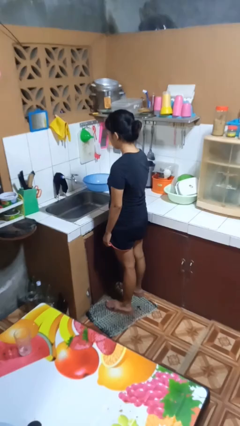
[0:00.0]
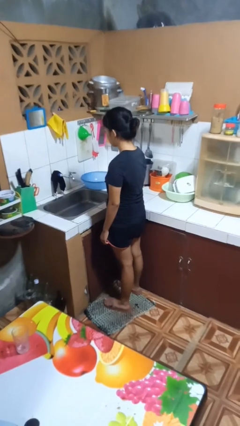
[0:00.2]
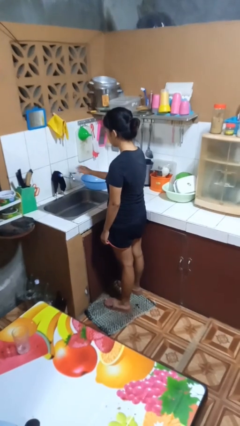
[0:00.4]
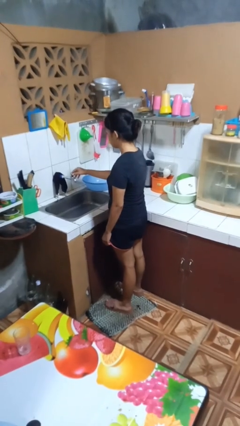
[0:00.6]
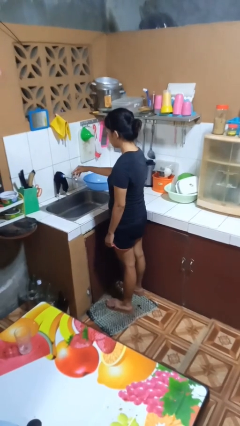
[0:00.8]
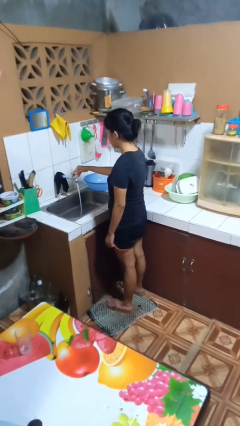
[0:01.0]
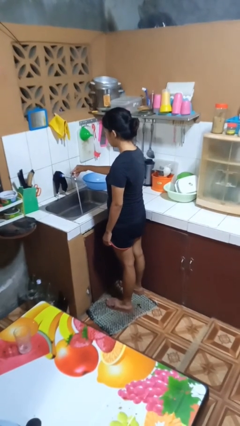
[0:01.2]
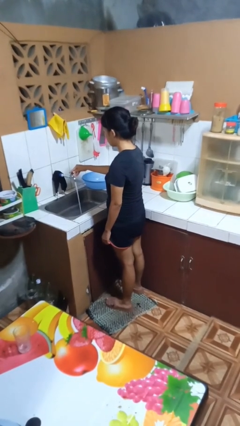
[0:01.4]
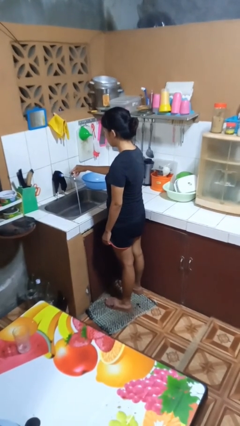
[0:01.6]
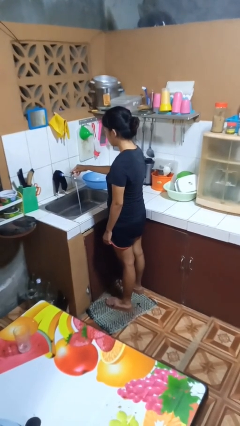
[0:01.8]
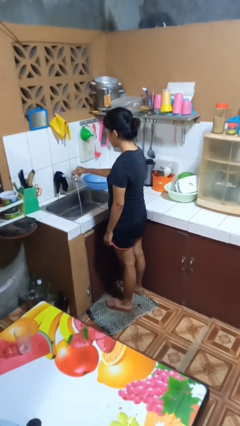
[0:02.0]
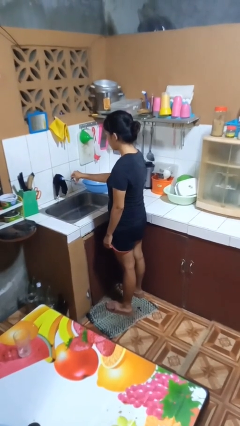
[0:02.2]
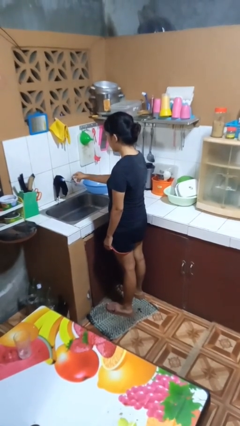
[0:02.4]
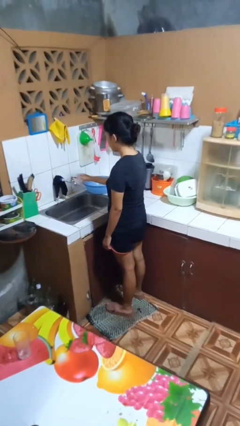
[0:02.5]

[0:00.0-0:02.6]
person turns on faucet

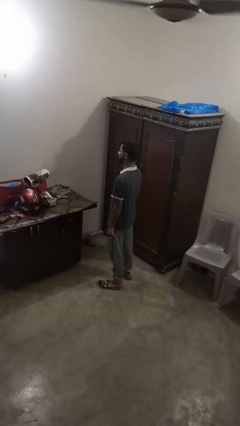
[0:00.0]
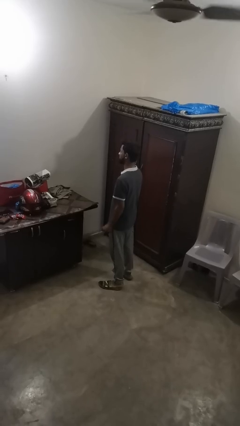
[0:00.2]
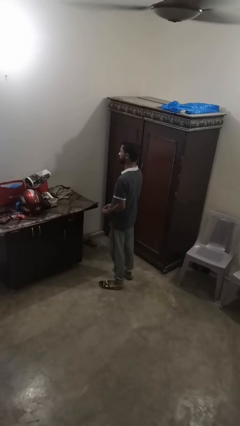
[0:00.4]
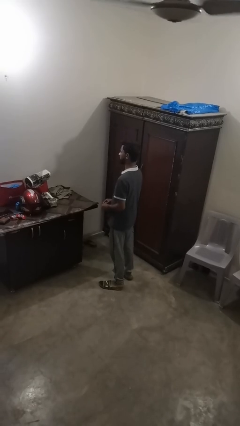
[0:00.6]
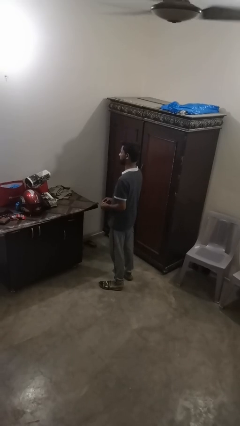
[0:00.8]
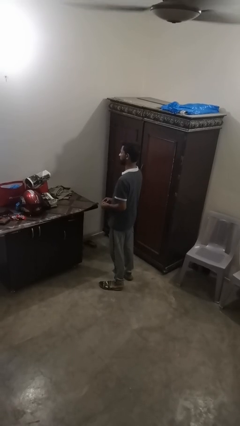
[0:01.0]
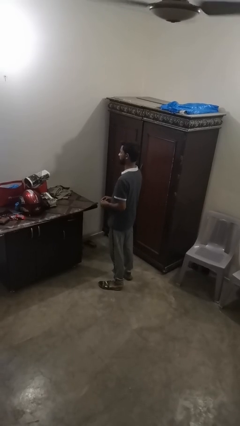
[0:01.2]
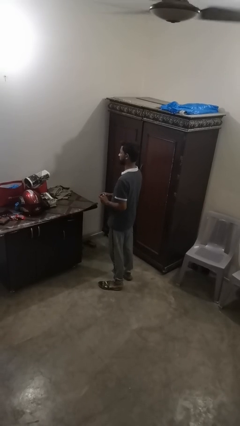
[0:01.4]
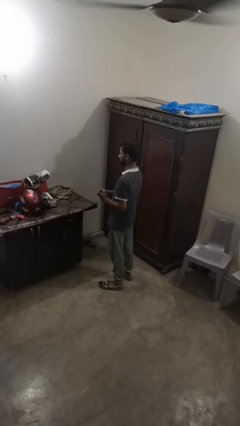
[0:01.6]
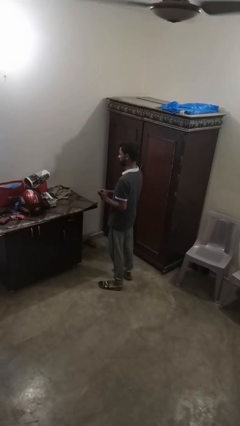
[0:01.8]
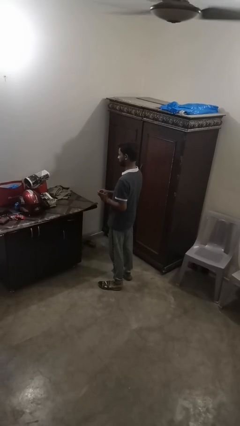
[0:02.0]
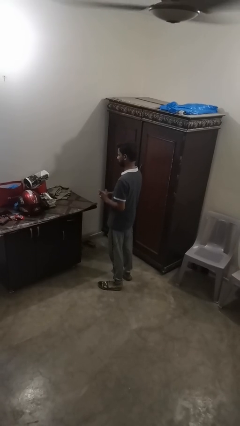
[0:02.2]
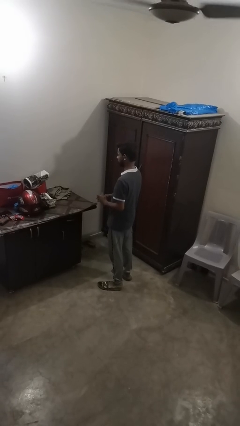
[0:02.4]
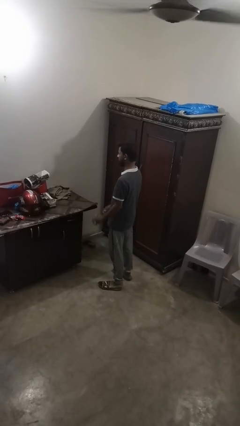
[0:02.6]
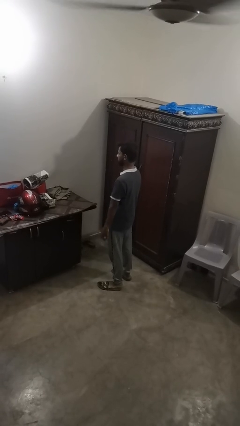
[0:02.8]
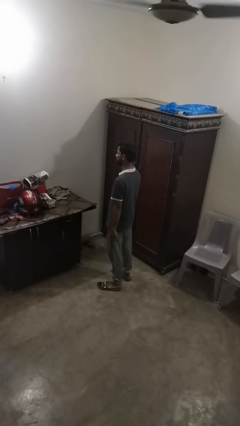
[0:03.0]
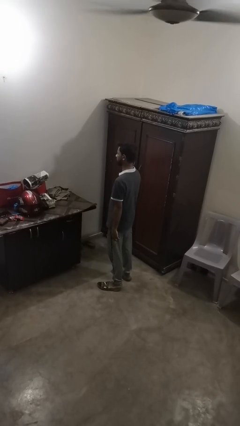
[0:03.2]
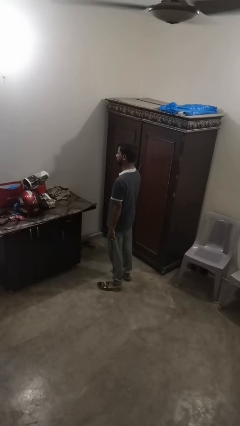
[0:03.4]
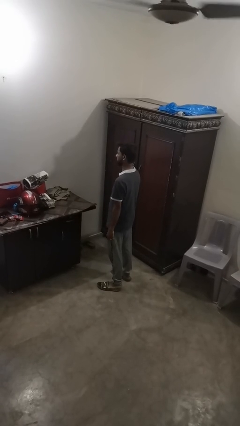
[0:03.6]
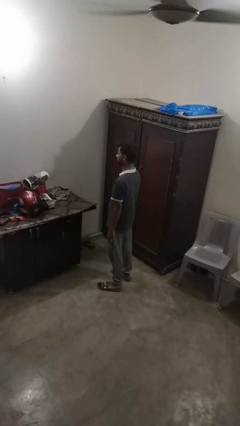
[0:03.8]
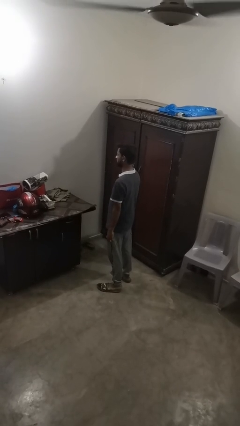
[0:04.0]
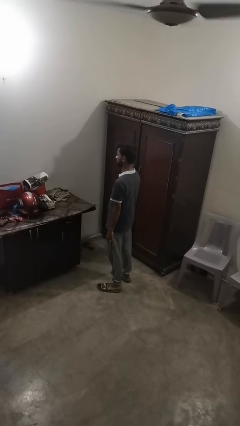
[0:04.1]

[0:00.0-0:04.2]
person puts on ring

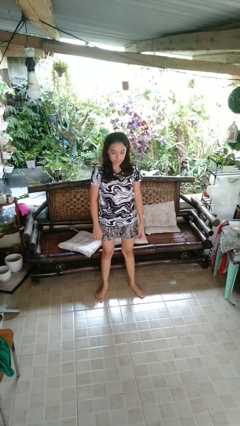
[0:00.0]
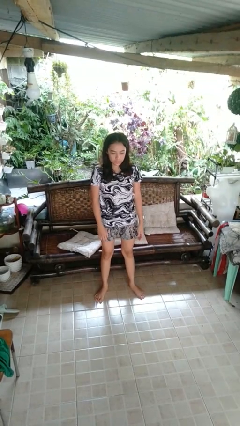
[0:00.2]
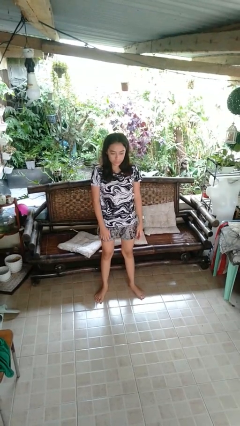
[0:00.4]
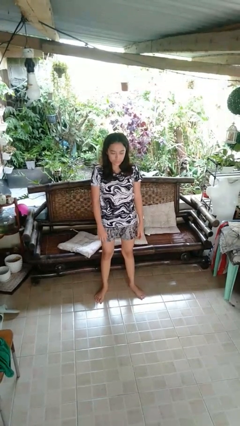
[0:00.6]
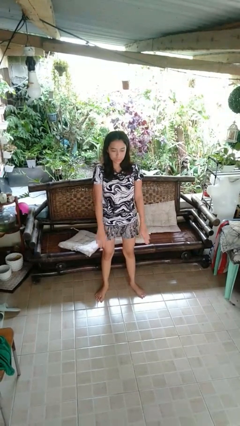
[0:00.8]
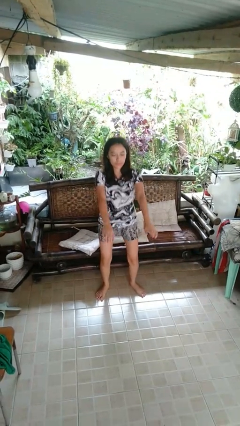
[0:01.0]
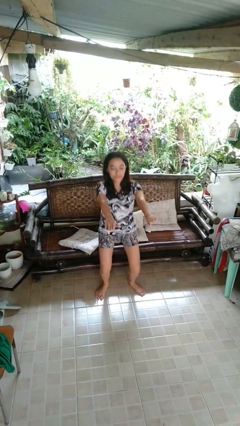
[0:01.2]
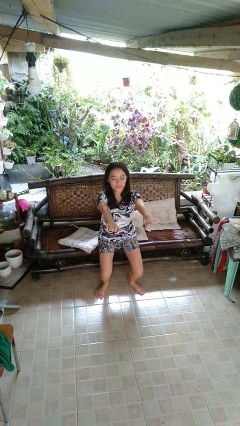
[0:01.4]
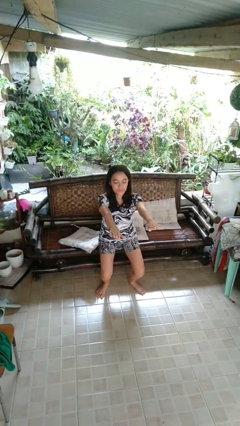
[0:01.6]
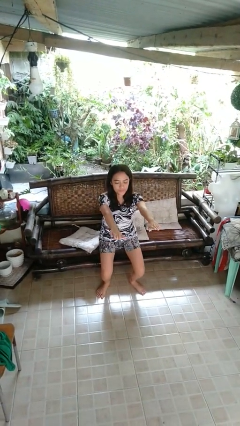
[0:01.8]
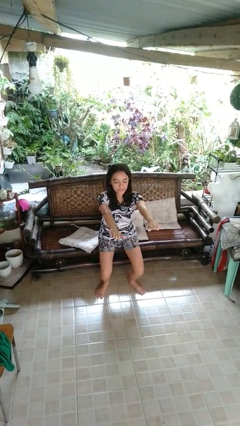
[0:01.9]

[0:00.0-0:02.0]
person squats

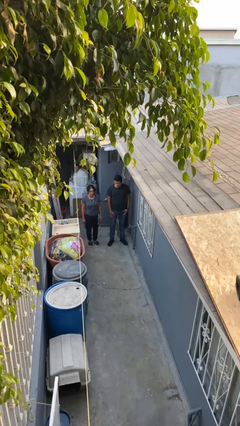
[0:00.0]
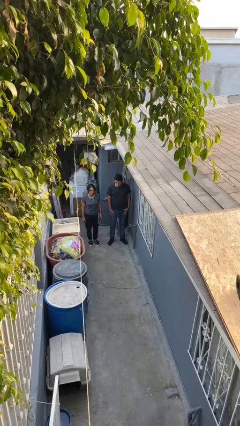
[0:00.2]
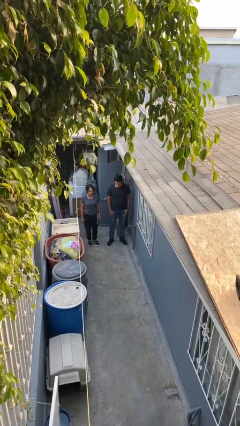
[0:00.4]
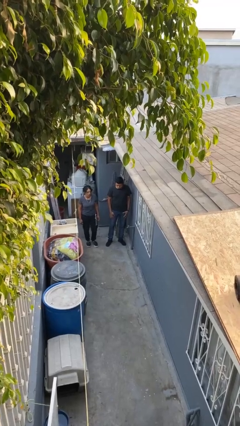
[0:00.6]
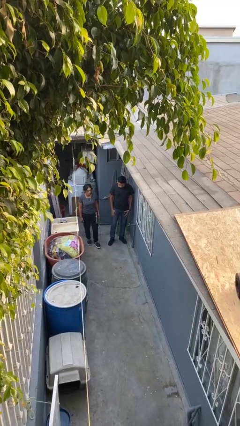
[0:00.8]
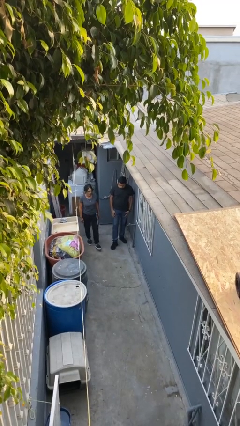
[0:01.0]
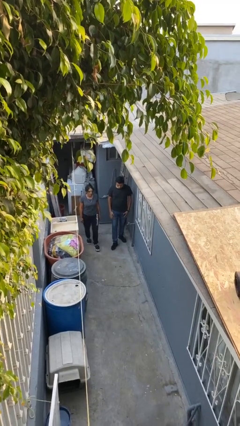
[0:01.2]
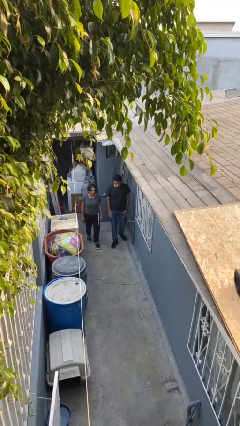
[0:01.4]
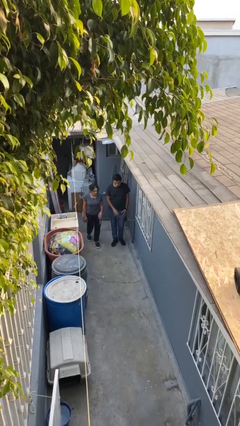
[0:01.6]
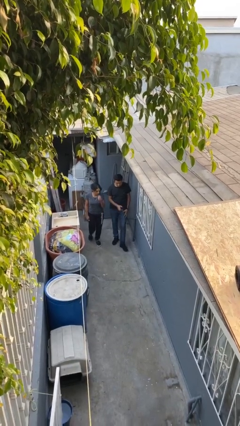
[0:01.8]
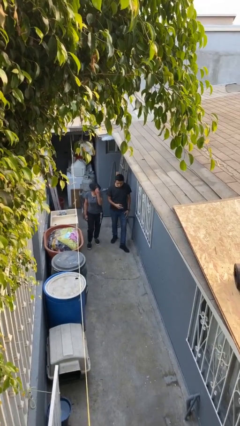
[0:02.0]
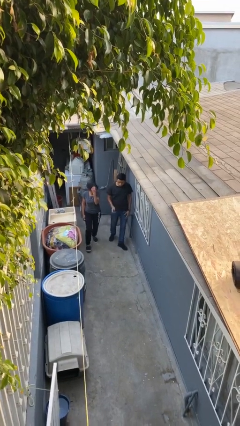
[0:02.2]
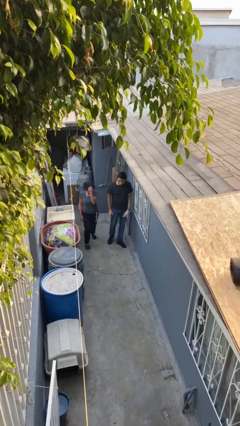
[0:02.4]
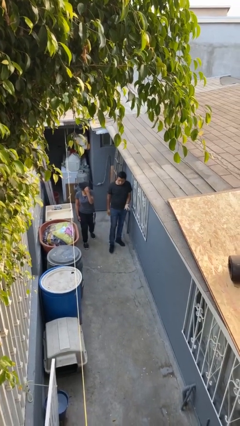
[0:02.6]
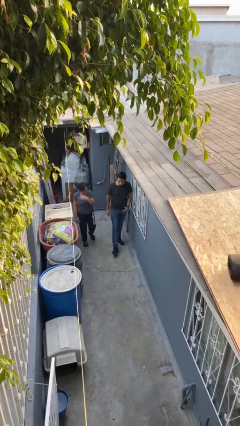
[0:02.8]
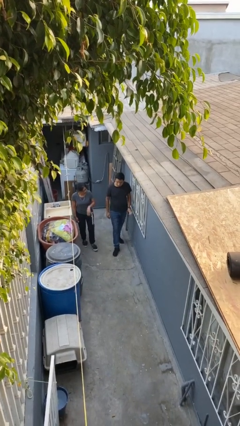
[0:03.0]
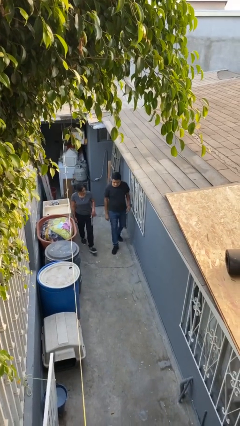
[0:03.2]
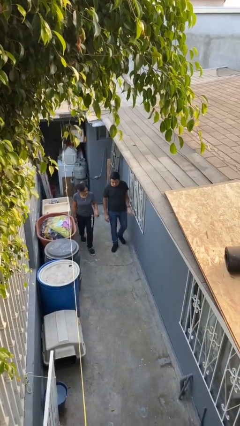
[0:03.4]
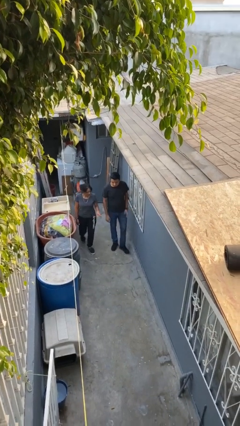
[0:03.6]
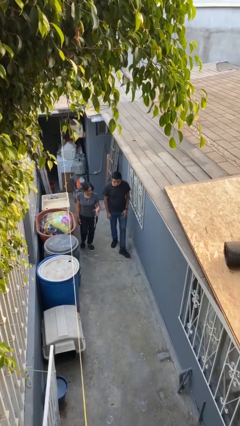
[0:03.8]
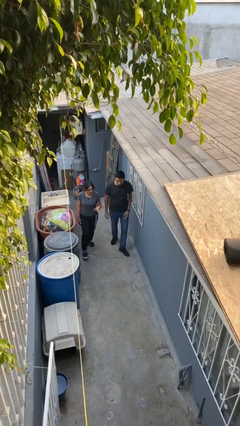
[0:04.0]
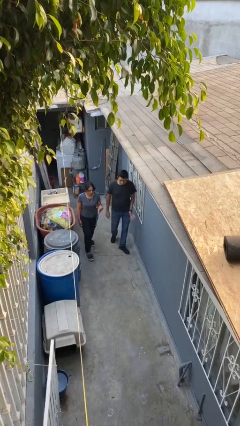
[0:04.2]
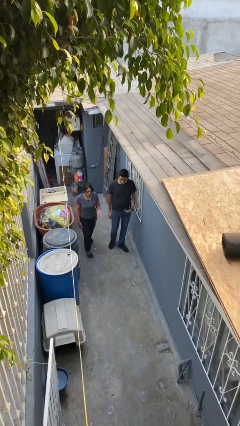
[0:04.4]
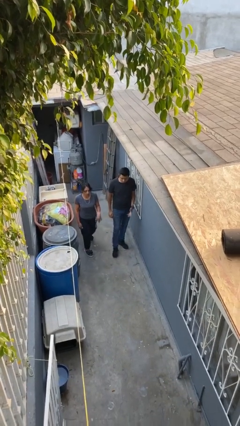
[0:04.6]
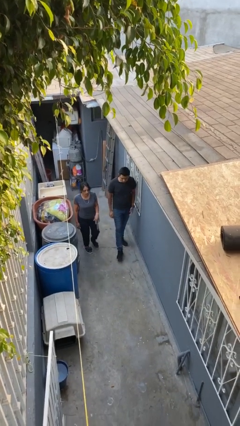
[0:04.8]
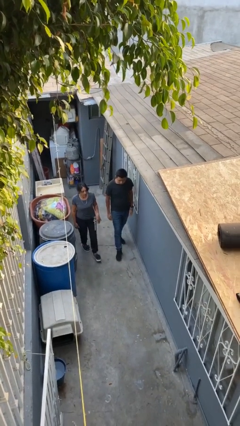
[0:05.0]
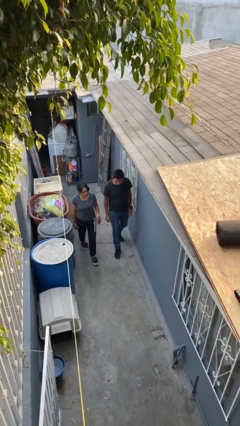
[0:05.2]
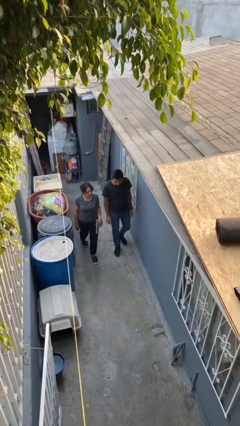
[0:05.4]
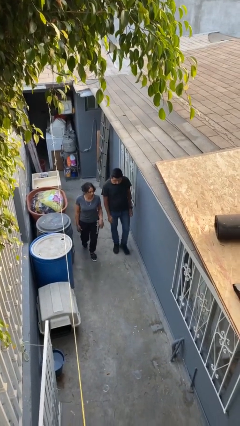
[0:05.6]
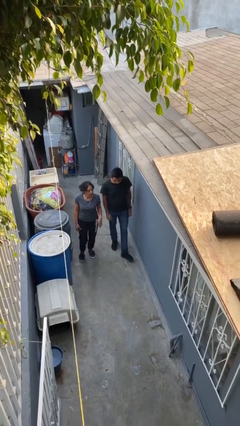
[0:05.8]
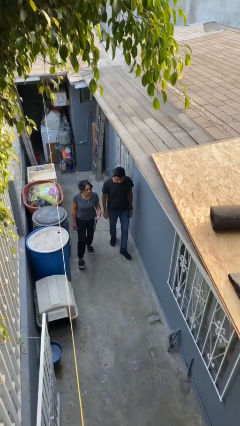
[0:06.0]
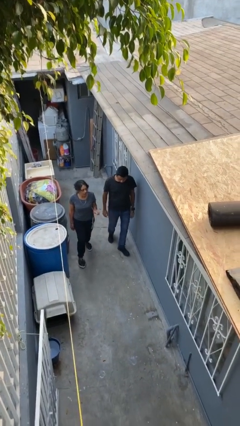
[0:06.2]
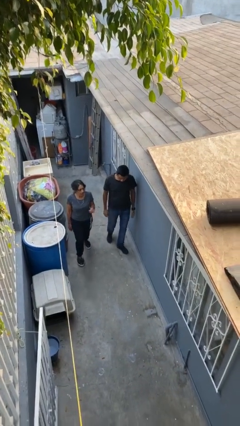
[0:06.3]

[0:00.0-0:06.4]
person talks to person

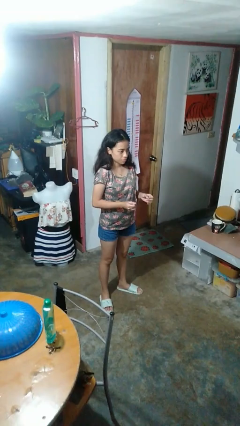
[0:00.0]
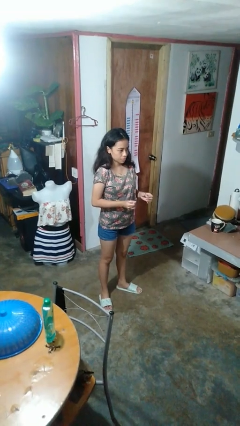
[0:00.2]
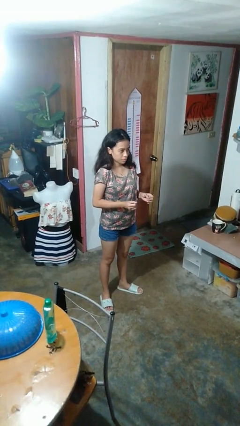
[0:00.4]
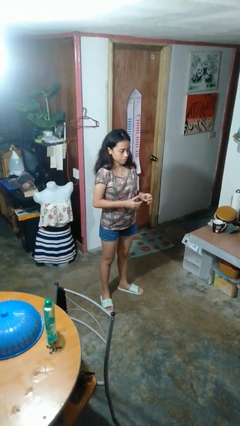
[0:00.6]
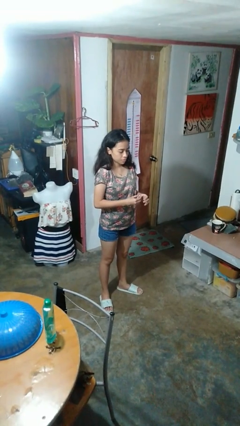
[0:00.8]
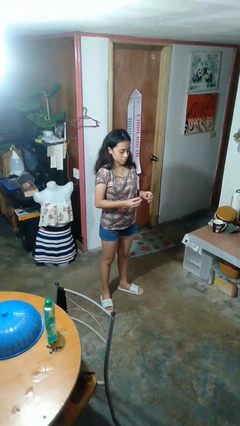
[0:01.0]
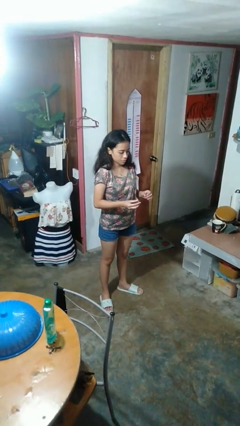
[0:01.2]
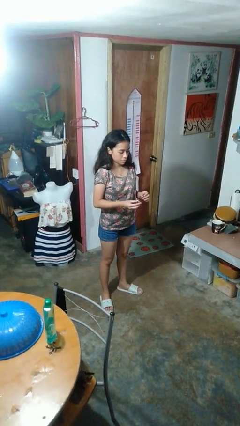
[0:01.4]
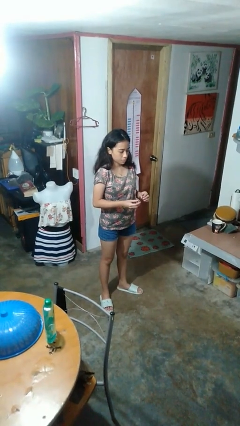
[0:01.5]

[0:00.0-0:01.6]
person takes off ring

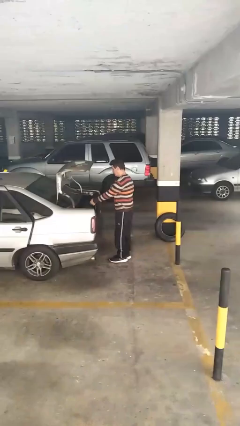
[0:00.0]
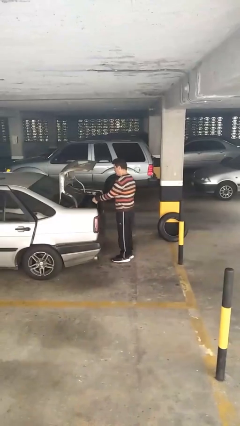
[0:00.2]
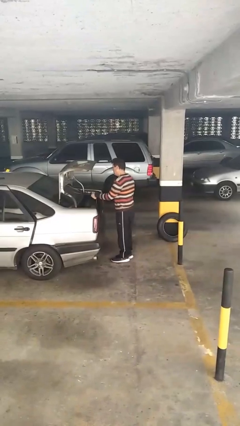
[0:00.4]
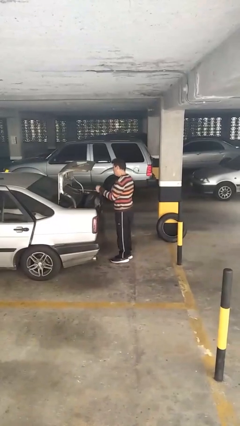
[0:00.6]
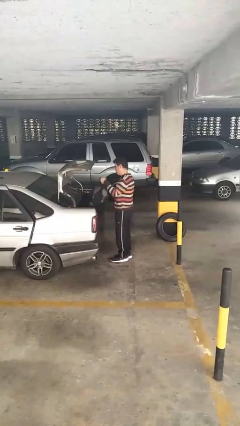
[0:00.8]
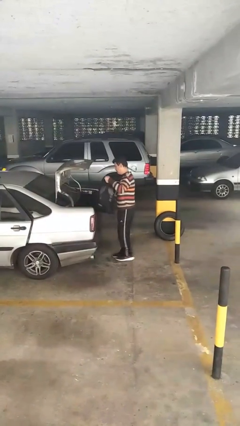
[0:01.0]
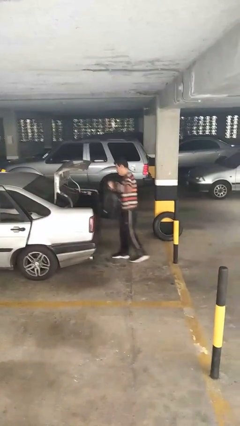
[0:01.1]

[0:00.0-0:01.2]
person unloads car
